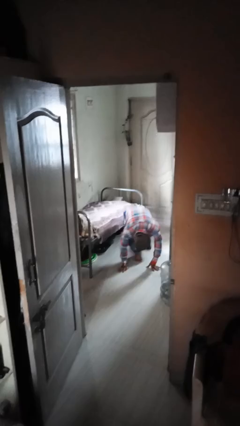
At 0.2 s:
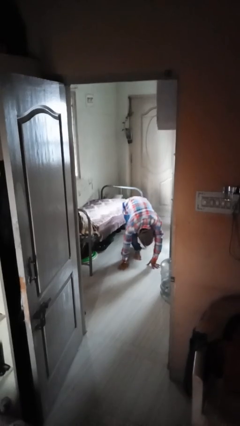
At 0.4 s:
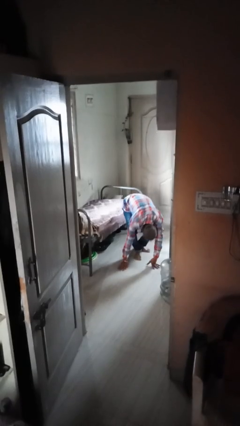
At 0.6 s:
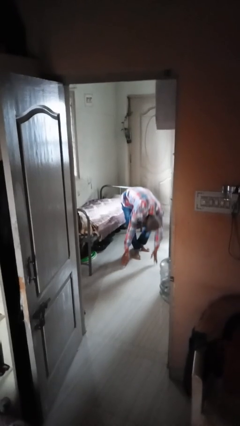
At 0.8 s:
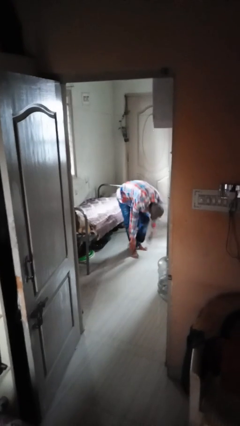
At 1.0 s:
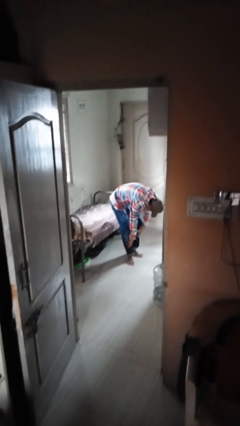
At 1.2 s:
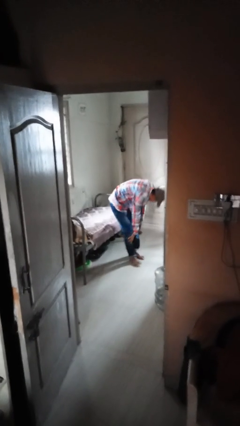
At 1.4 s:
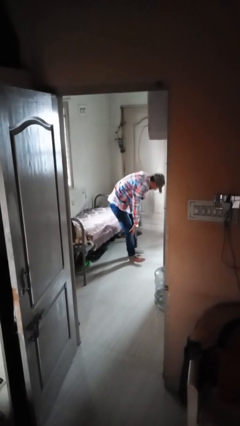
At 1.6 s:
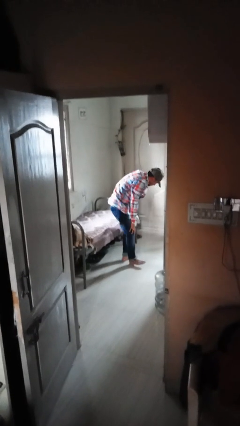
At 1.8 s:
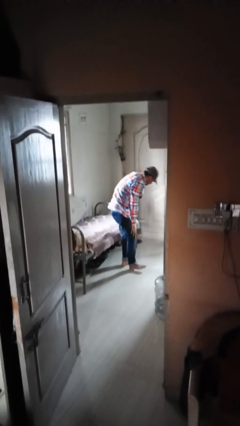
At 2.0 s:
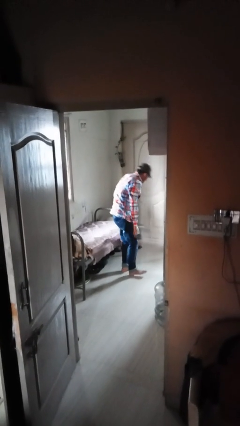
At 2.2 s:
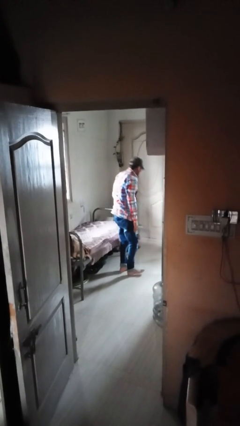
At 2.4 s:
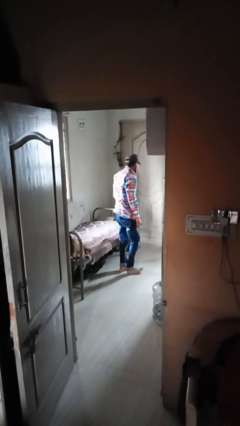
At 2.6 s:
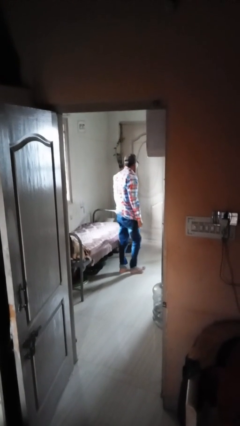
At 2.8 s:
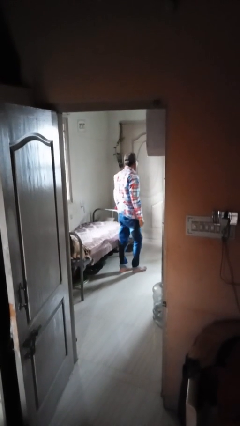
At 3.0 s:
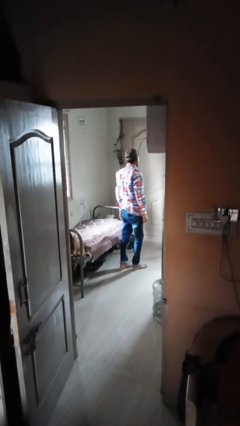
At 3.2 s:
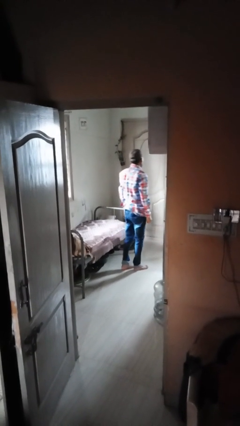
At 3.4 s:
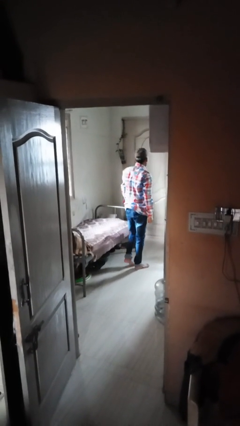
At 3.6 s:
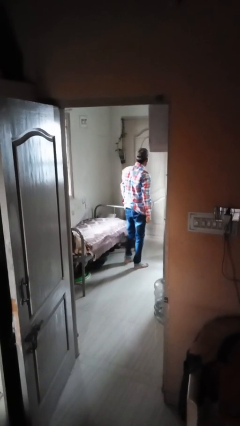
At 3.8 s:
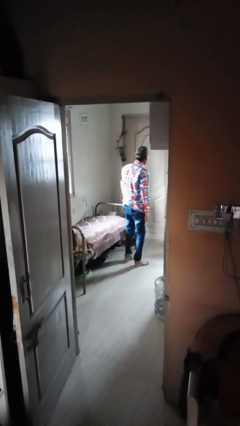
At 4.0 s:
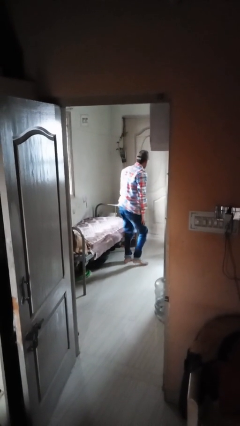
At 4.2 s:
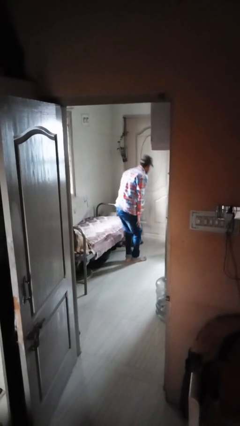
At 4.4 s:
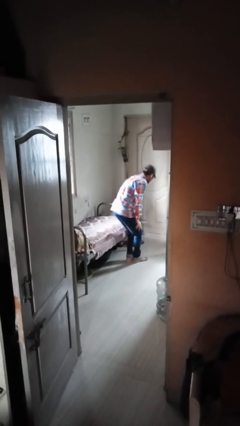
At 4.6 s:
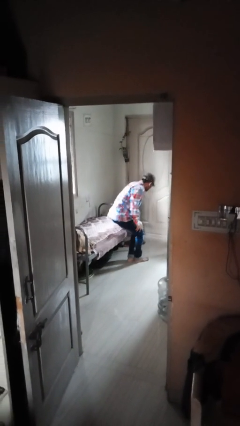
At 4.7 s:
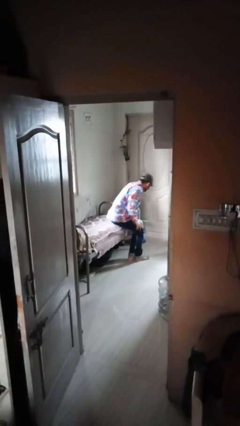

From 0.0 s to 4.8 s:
person stands up from floor

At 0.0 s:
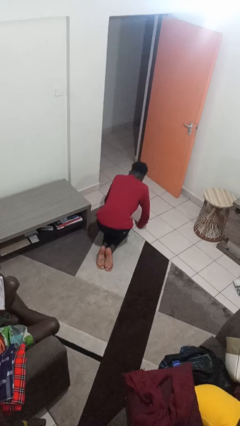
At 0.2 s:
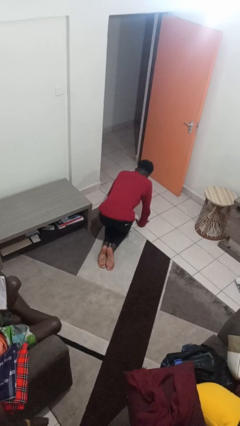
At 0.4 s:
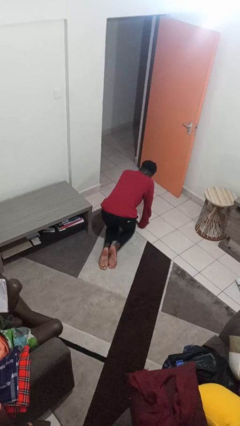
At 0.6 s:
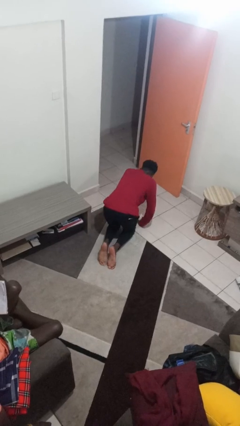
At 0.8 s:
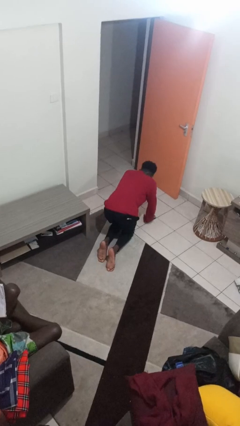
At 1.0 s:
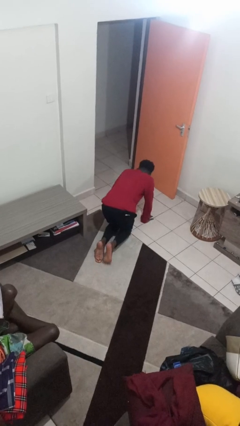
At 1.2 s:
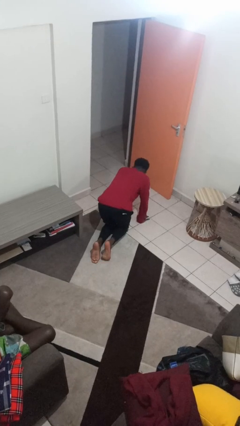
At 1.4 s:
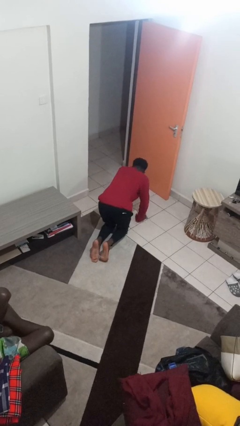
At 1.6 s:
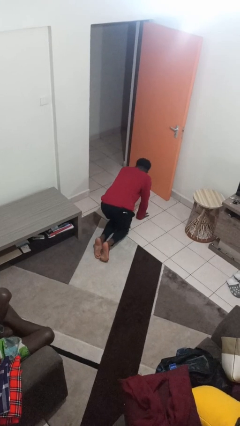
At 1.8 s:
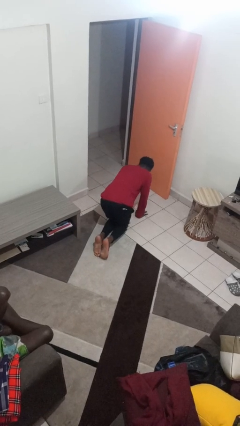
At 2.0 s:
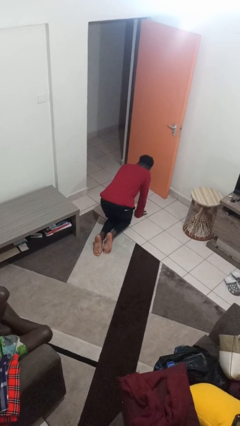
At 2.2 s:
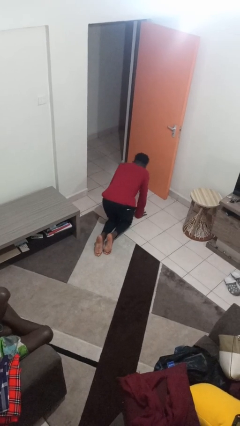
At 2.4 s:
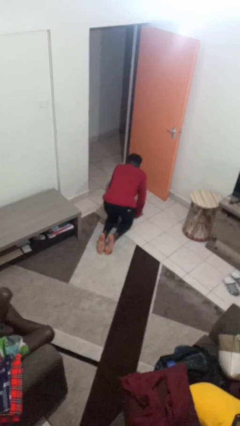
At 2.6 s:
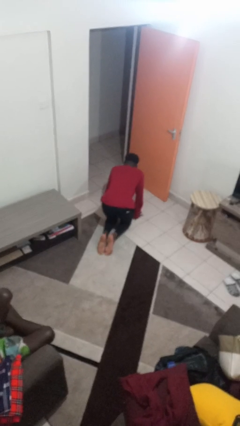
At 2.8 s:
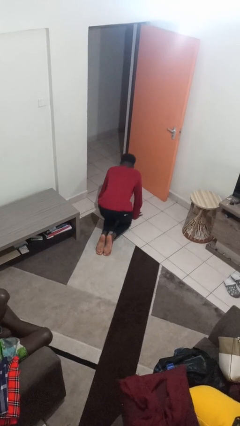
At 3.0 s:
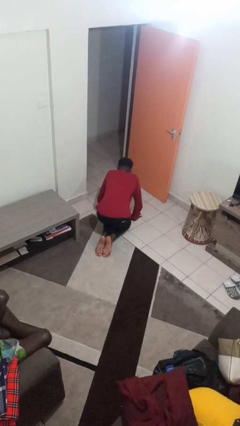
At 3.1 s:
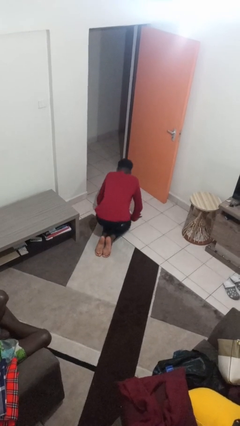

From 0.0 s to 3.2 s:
person crawls

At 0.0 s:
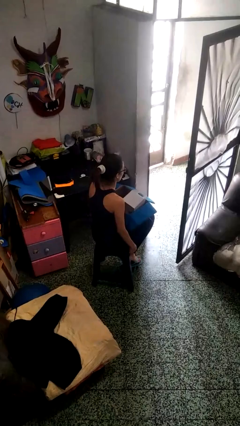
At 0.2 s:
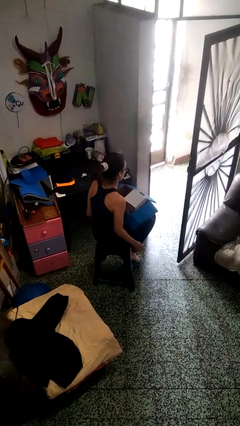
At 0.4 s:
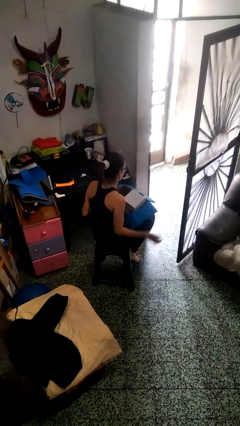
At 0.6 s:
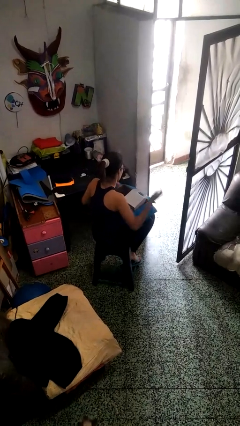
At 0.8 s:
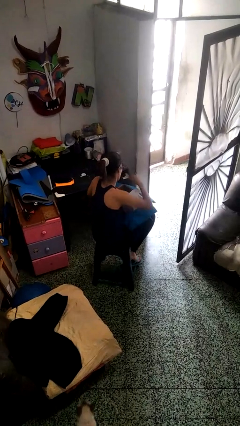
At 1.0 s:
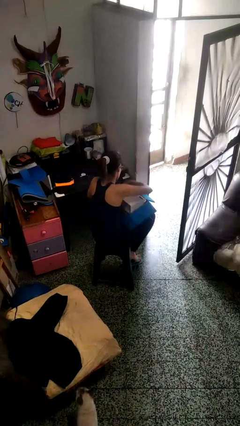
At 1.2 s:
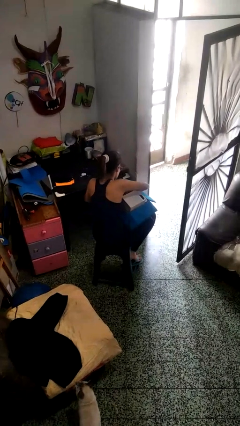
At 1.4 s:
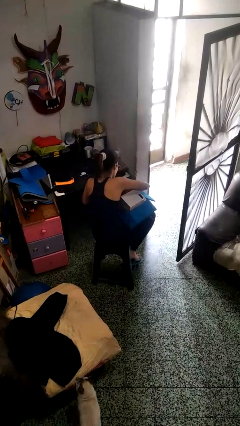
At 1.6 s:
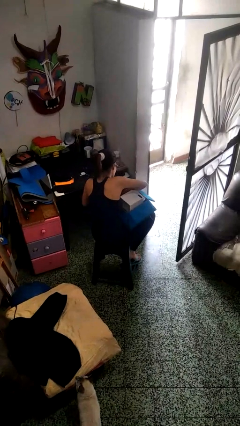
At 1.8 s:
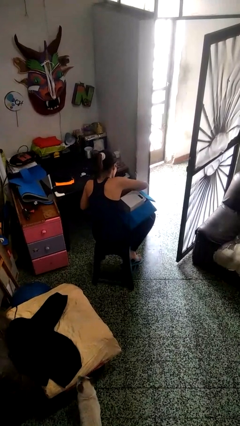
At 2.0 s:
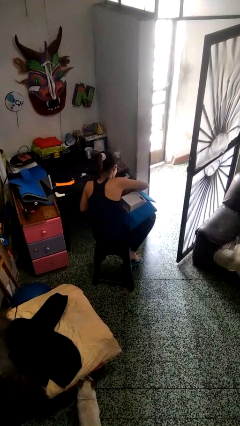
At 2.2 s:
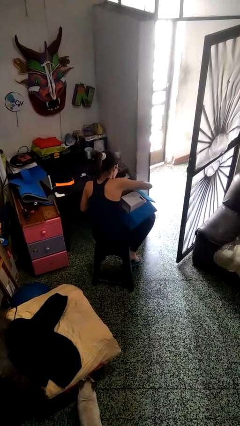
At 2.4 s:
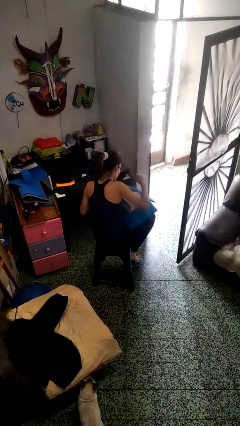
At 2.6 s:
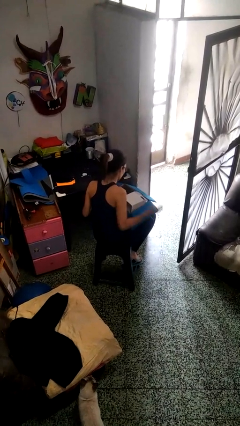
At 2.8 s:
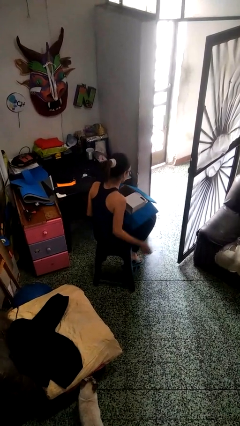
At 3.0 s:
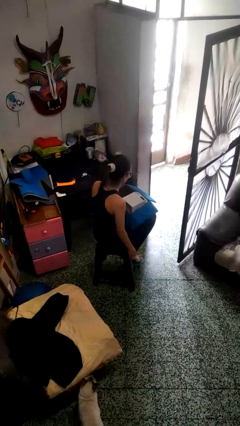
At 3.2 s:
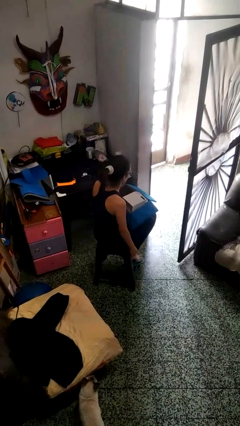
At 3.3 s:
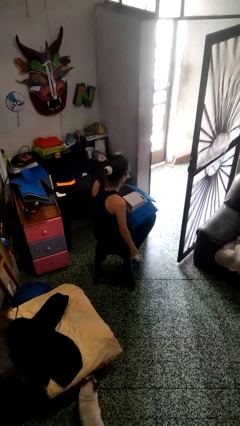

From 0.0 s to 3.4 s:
person searches in box

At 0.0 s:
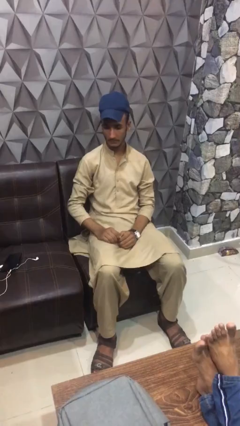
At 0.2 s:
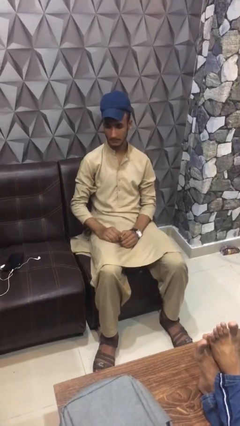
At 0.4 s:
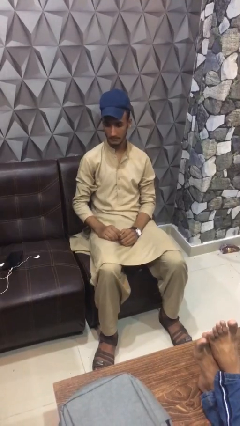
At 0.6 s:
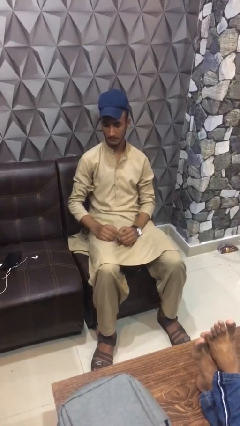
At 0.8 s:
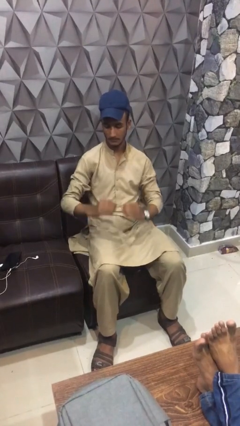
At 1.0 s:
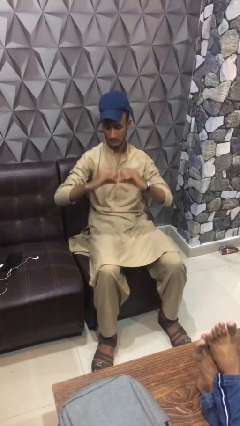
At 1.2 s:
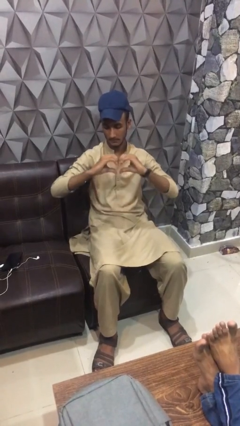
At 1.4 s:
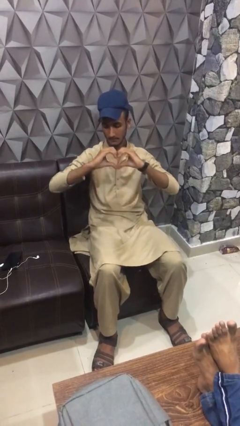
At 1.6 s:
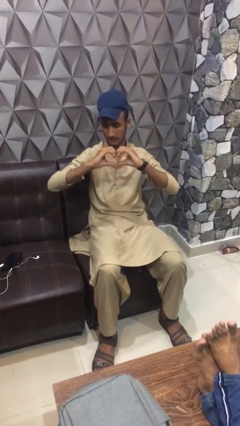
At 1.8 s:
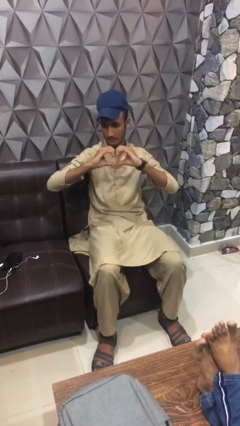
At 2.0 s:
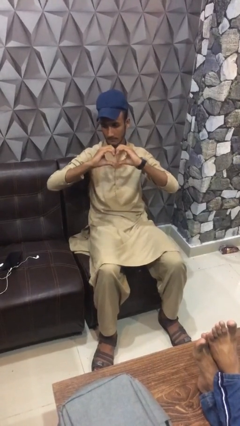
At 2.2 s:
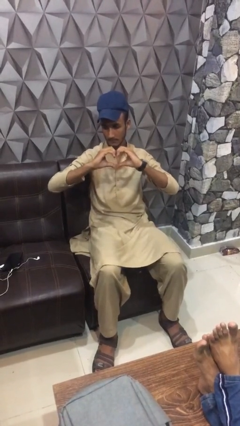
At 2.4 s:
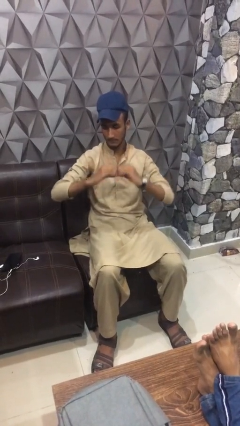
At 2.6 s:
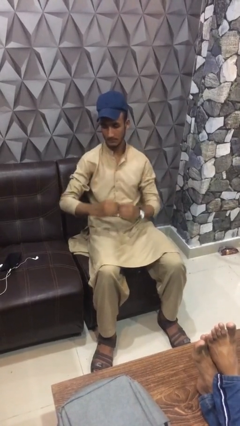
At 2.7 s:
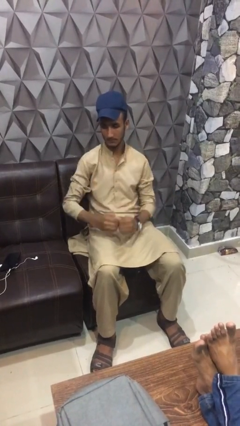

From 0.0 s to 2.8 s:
person gestures heart

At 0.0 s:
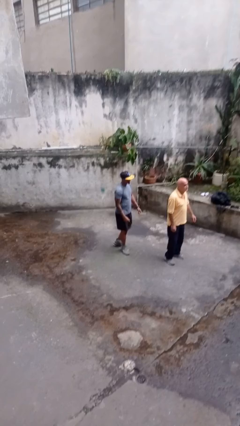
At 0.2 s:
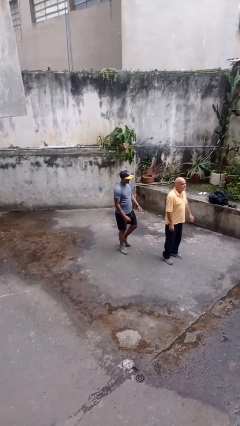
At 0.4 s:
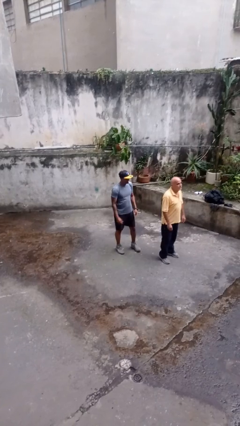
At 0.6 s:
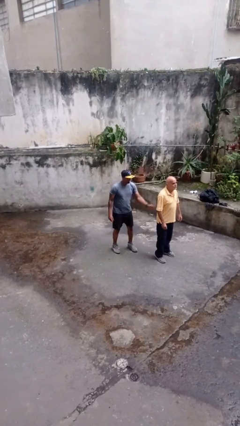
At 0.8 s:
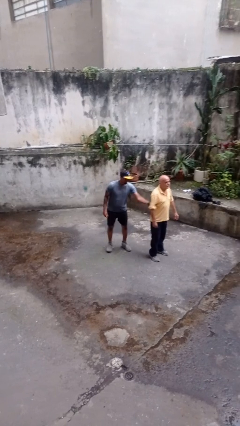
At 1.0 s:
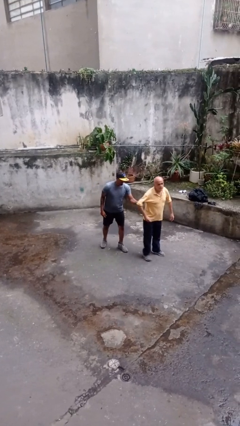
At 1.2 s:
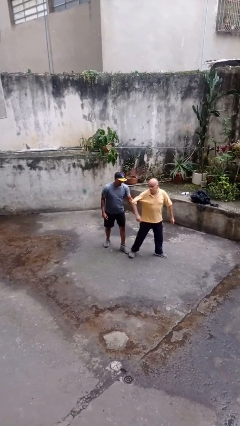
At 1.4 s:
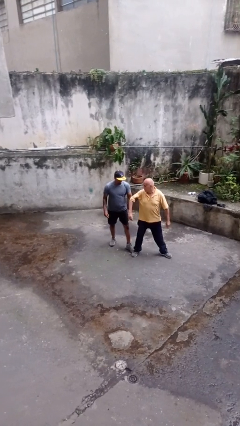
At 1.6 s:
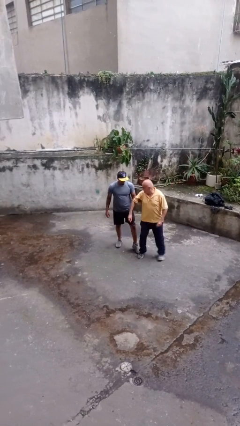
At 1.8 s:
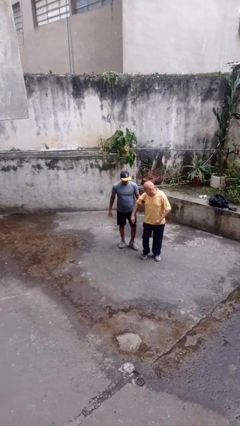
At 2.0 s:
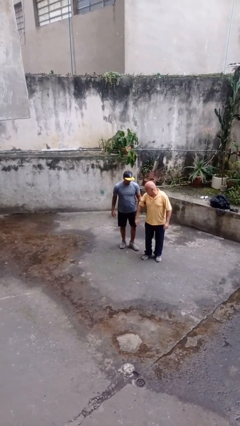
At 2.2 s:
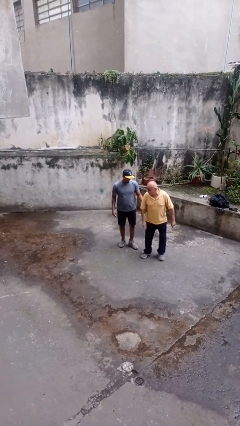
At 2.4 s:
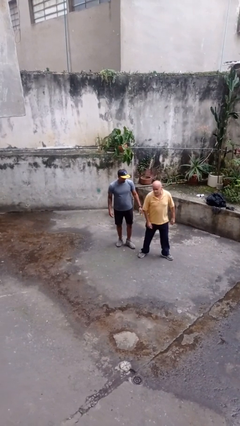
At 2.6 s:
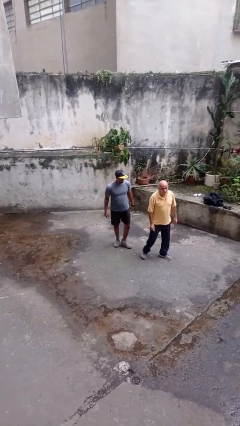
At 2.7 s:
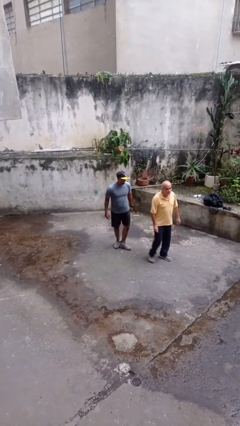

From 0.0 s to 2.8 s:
person grabs person by bicep

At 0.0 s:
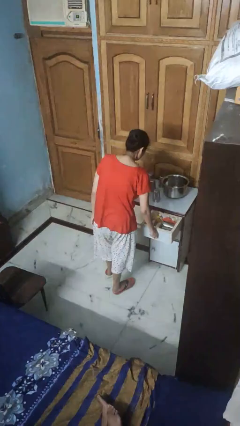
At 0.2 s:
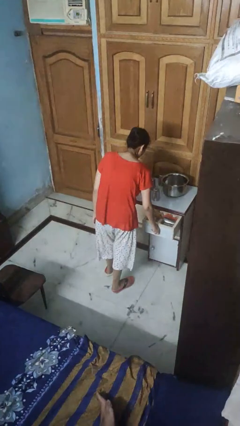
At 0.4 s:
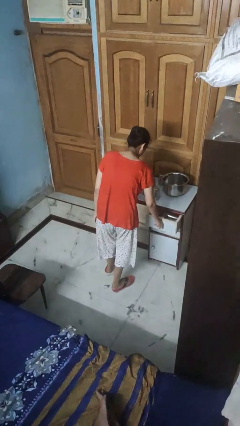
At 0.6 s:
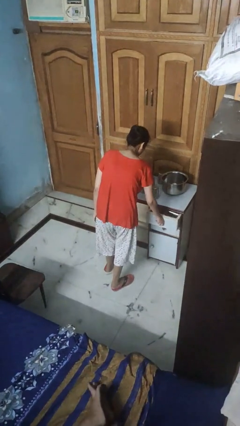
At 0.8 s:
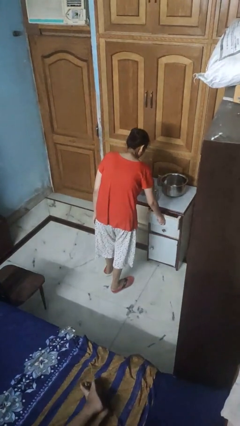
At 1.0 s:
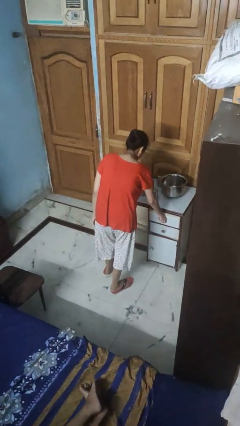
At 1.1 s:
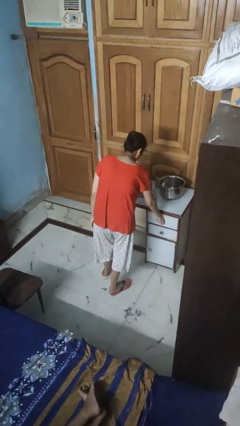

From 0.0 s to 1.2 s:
person closes kitchen drawer
